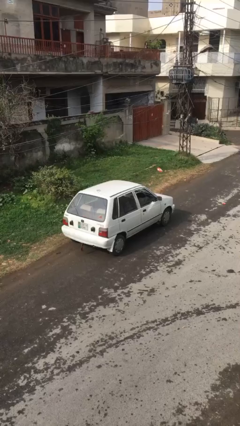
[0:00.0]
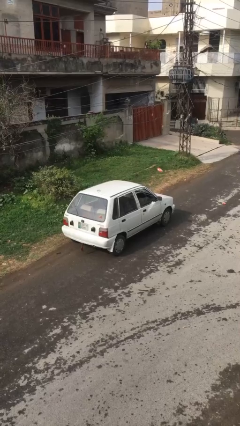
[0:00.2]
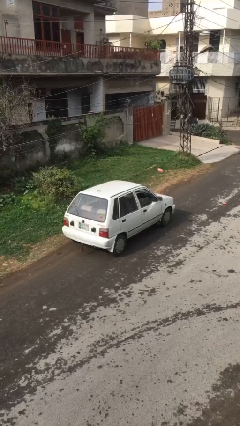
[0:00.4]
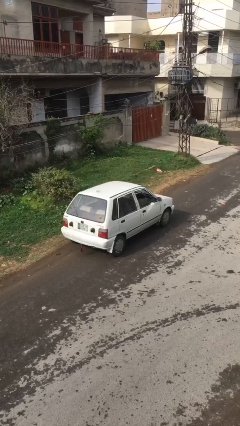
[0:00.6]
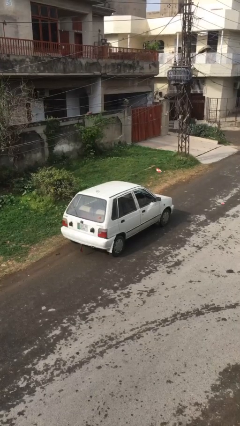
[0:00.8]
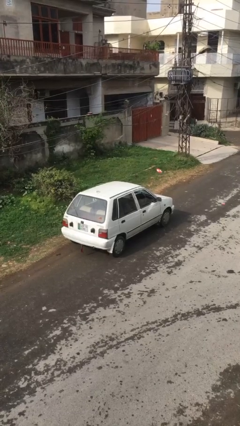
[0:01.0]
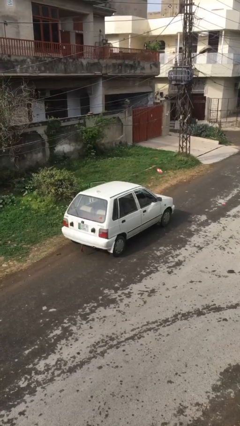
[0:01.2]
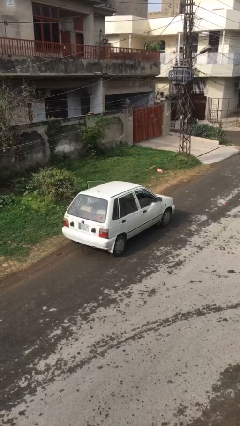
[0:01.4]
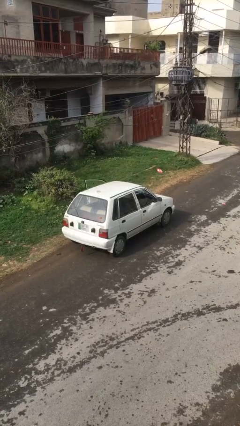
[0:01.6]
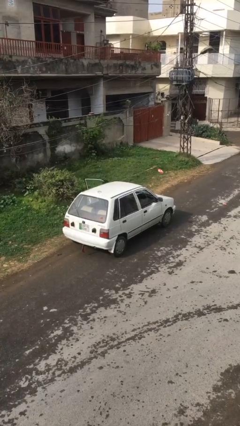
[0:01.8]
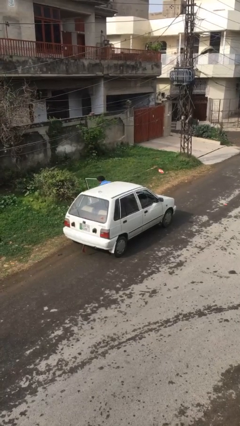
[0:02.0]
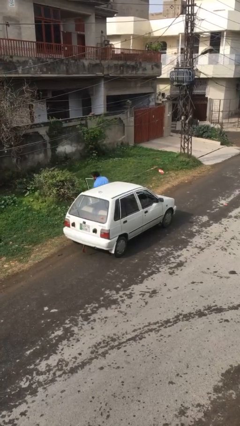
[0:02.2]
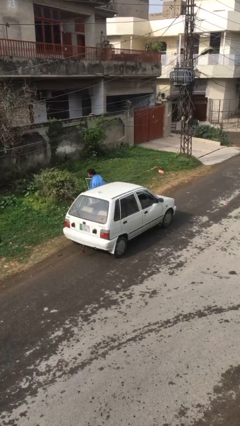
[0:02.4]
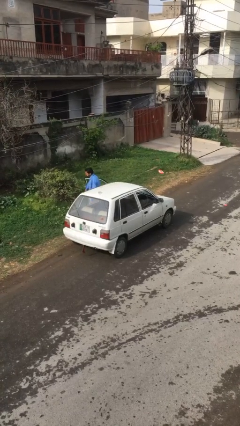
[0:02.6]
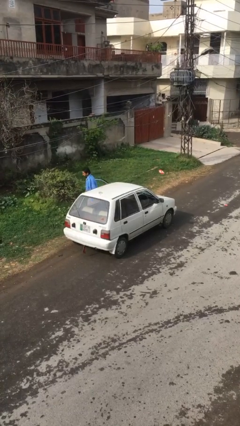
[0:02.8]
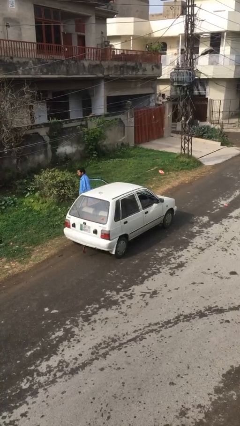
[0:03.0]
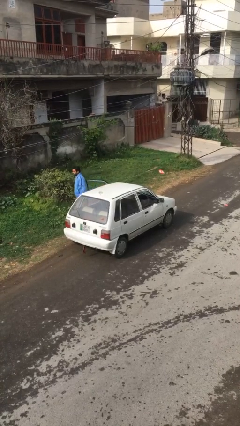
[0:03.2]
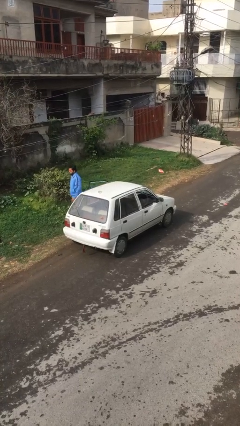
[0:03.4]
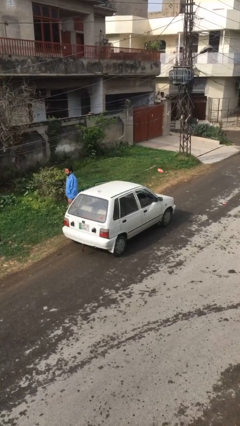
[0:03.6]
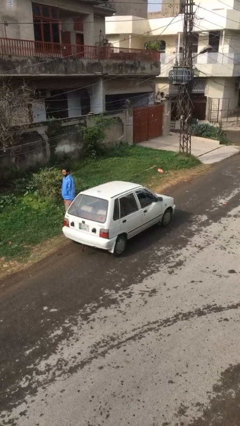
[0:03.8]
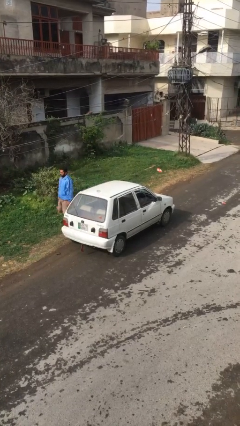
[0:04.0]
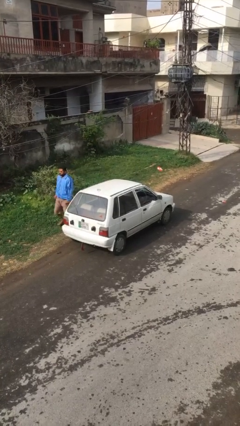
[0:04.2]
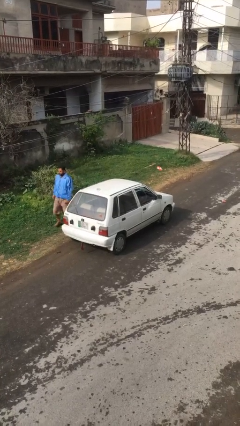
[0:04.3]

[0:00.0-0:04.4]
car drops off person

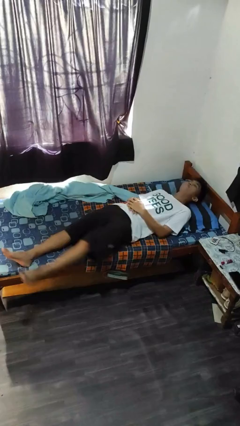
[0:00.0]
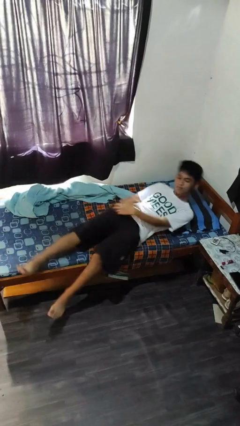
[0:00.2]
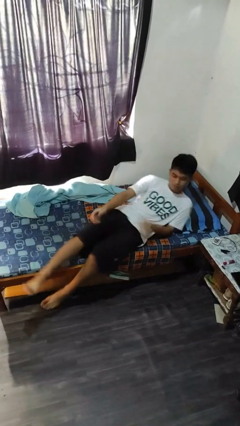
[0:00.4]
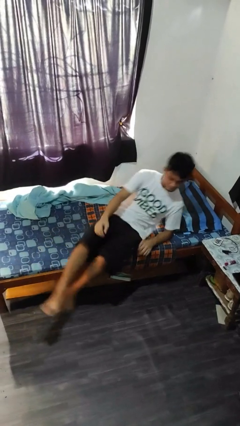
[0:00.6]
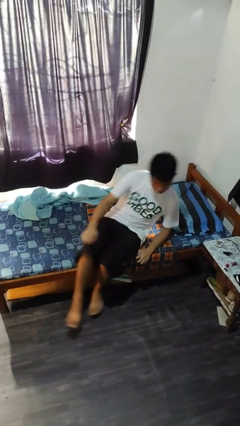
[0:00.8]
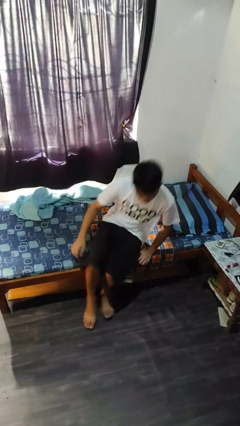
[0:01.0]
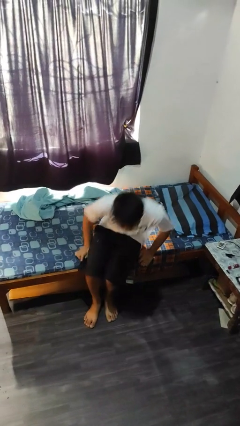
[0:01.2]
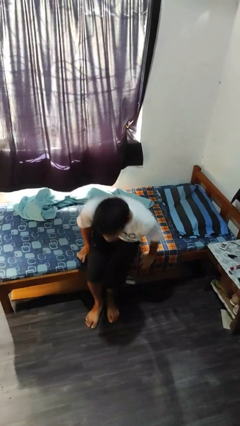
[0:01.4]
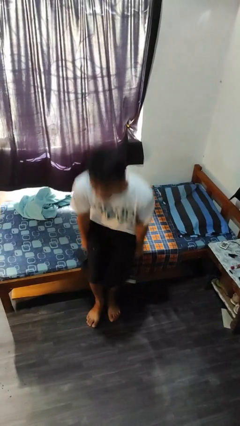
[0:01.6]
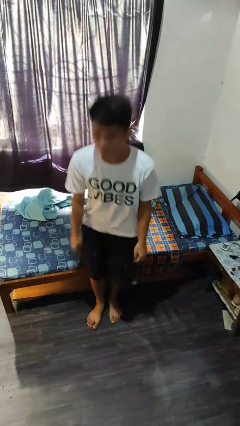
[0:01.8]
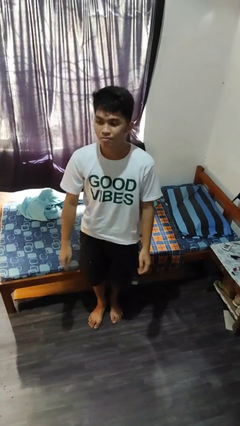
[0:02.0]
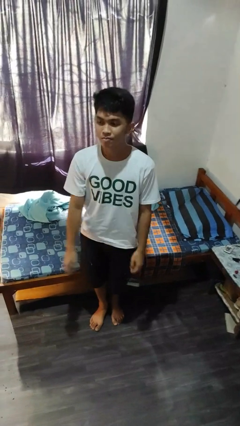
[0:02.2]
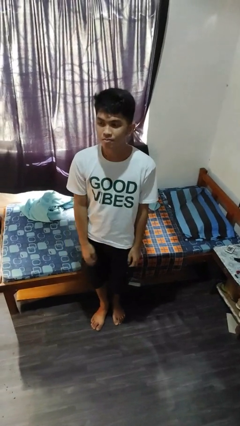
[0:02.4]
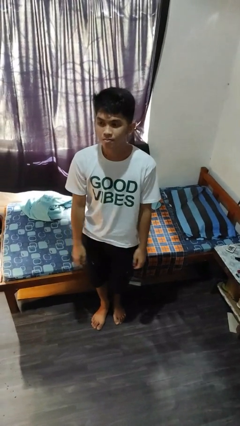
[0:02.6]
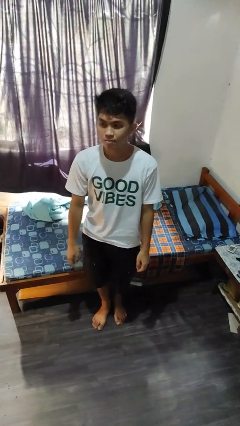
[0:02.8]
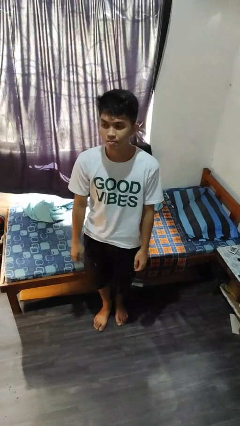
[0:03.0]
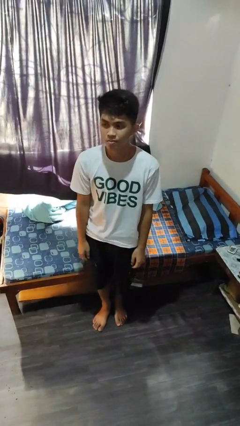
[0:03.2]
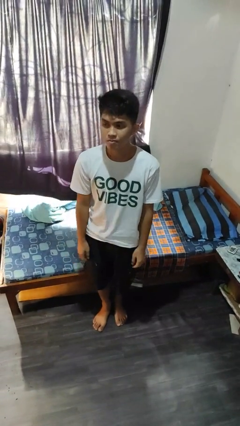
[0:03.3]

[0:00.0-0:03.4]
person stands up

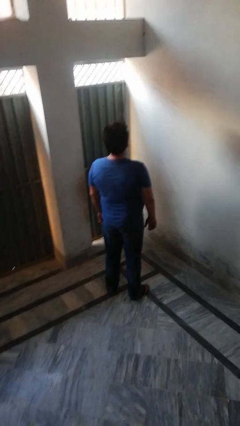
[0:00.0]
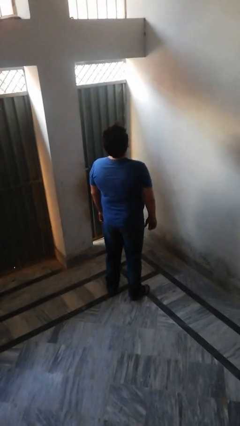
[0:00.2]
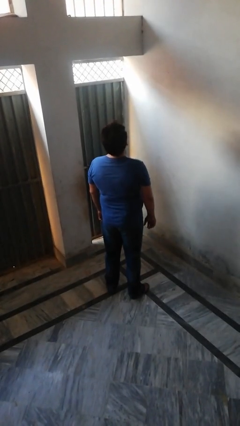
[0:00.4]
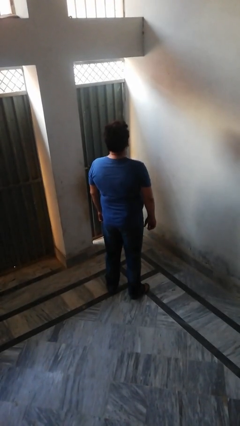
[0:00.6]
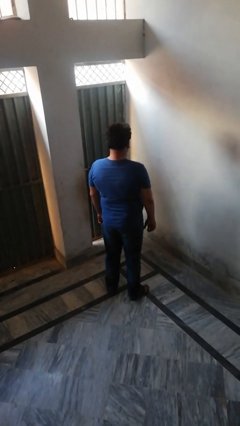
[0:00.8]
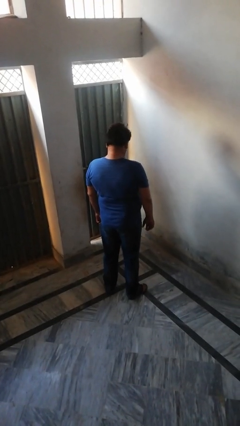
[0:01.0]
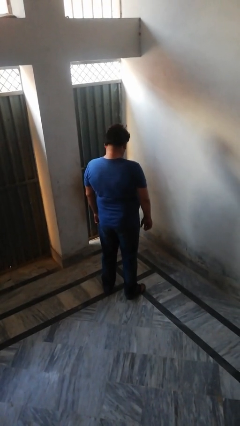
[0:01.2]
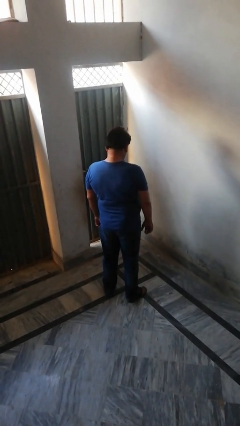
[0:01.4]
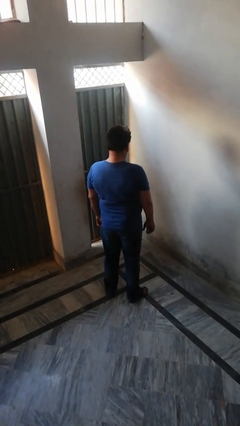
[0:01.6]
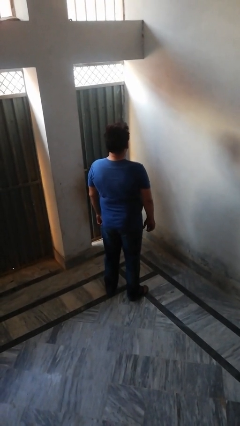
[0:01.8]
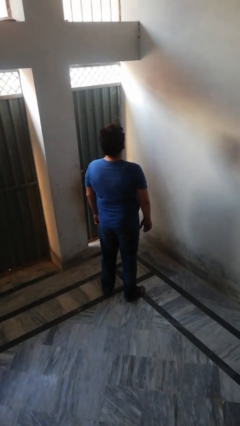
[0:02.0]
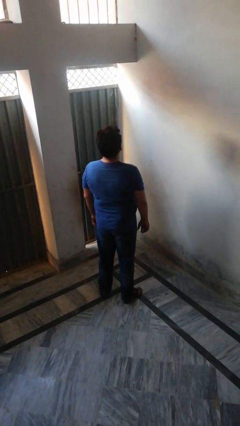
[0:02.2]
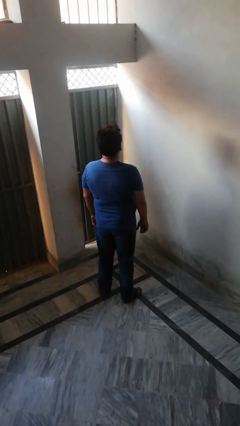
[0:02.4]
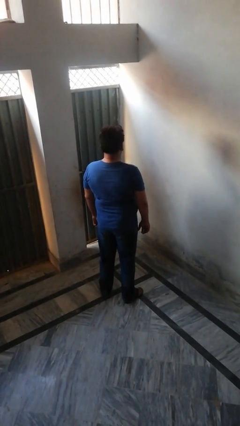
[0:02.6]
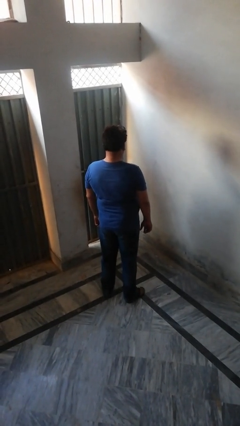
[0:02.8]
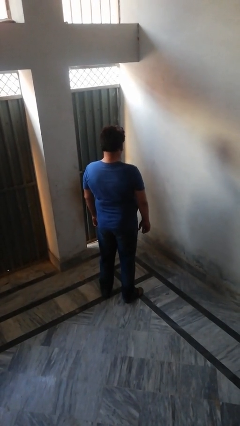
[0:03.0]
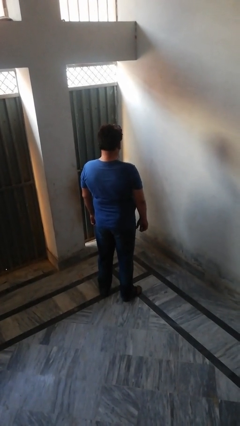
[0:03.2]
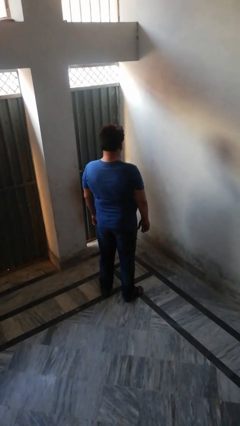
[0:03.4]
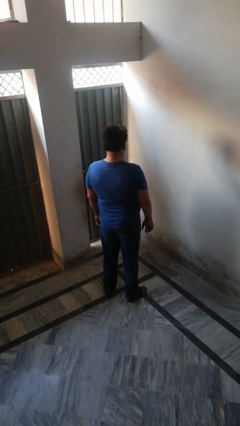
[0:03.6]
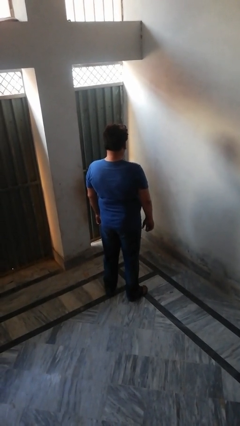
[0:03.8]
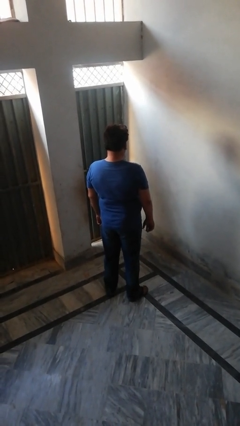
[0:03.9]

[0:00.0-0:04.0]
person nods head

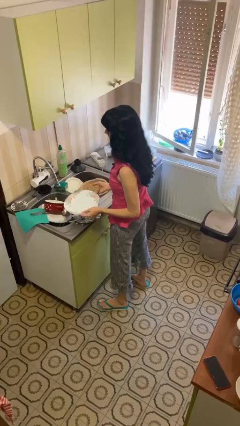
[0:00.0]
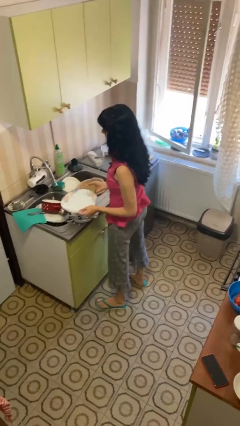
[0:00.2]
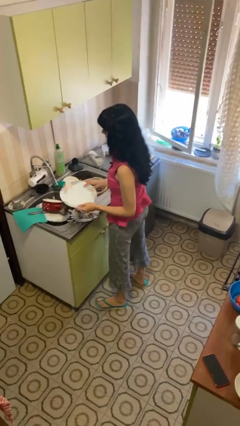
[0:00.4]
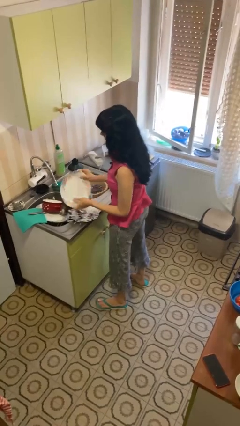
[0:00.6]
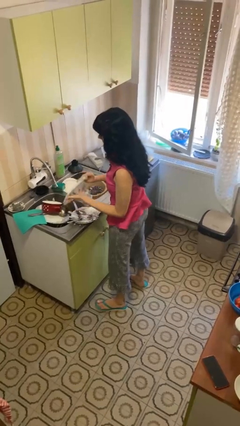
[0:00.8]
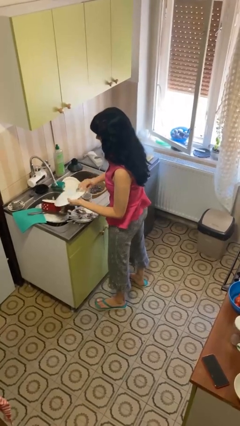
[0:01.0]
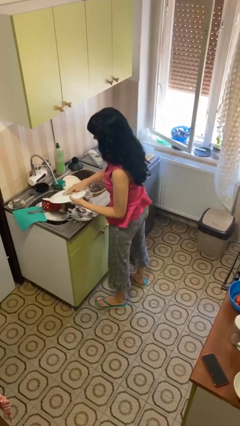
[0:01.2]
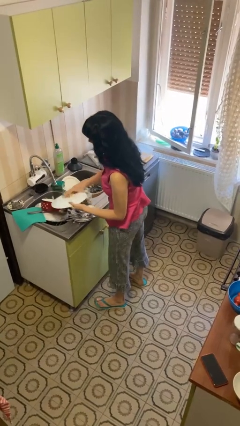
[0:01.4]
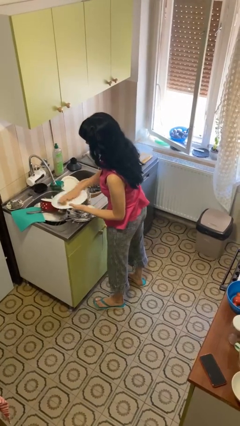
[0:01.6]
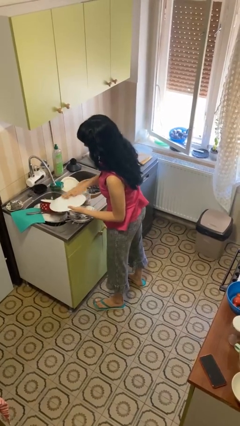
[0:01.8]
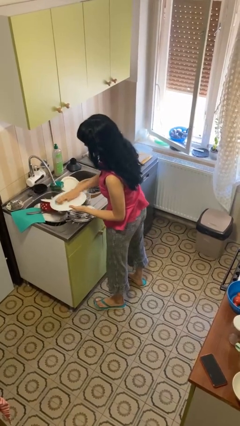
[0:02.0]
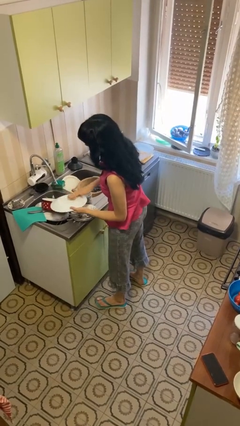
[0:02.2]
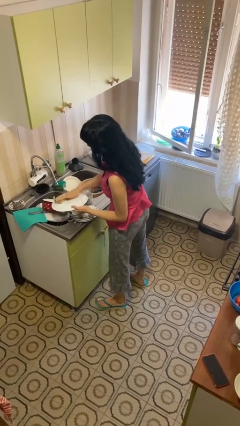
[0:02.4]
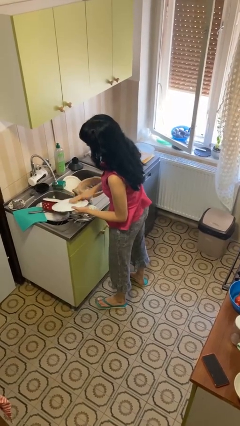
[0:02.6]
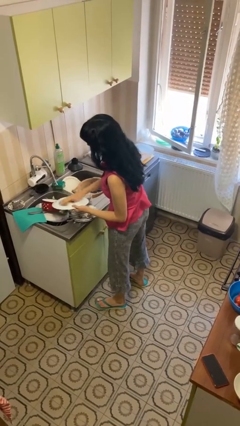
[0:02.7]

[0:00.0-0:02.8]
person washes dish

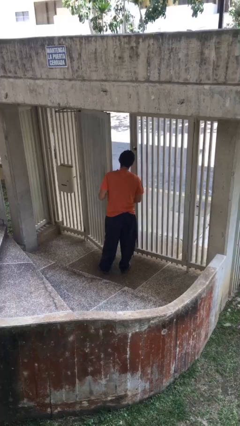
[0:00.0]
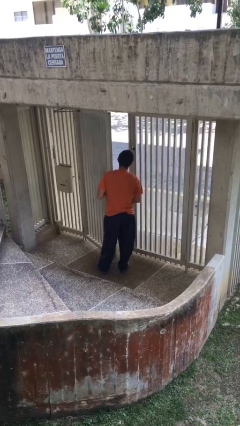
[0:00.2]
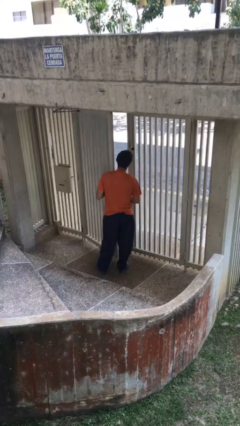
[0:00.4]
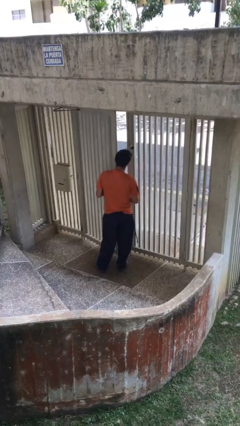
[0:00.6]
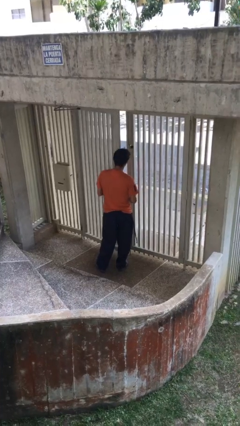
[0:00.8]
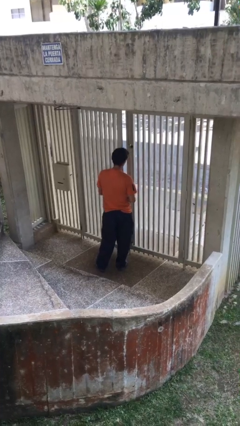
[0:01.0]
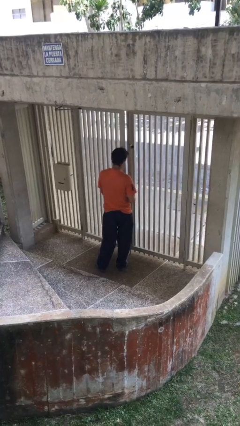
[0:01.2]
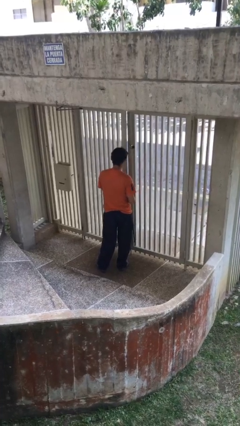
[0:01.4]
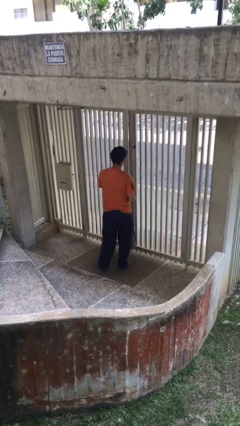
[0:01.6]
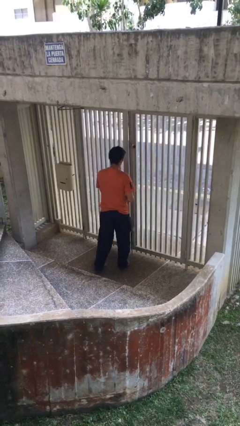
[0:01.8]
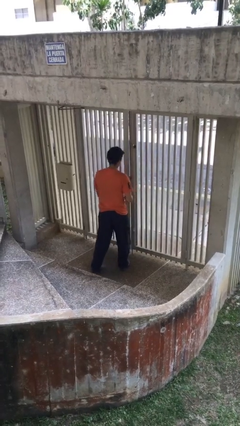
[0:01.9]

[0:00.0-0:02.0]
person closes facility door

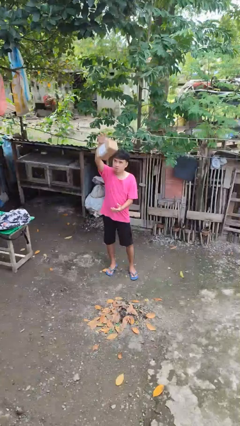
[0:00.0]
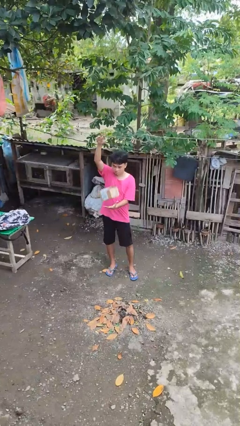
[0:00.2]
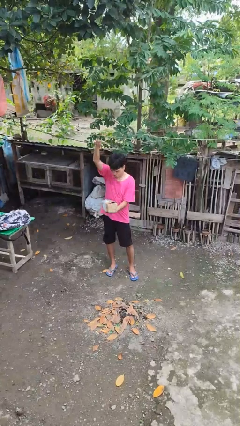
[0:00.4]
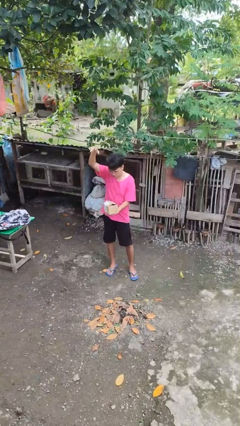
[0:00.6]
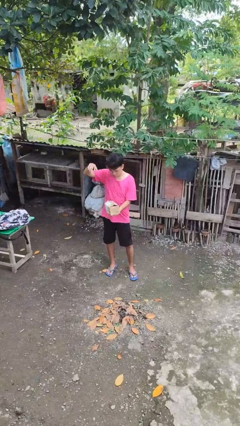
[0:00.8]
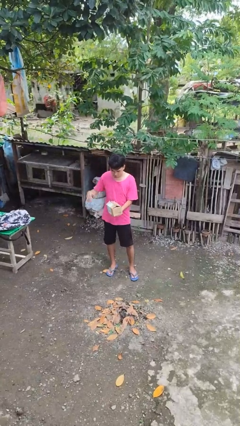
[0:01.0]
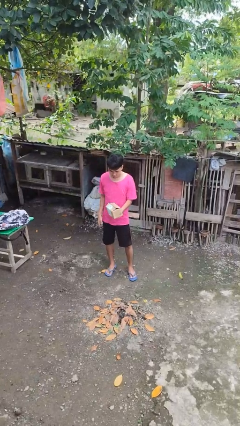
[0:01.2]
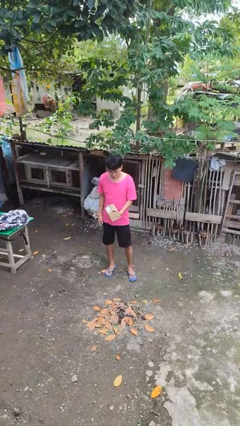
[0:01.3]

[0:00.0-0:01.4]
person catches dropped object
